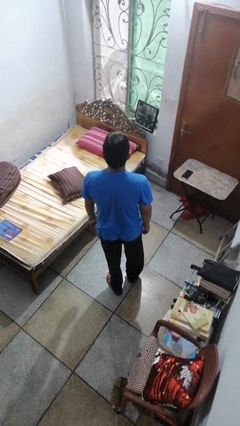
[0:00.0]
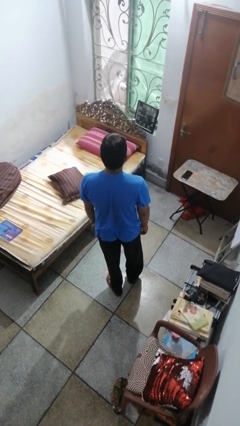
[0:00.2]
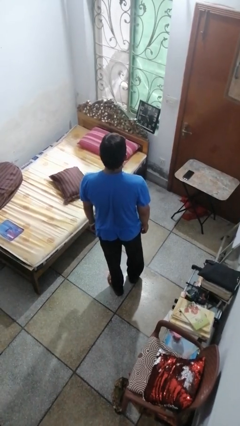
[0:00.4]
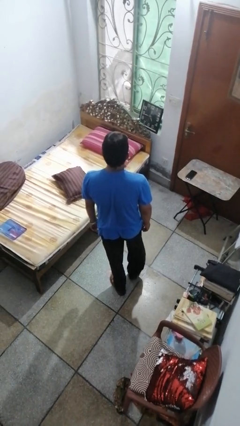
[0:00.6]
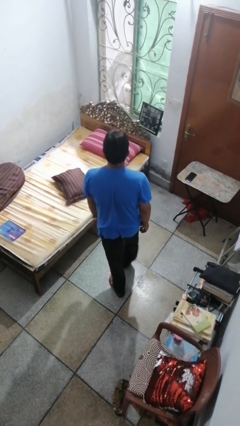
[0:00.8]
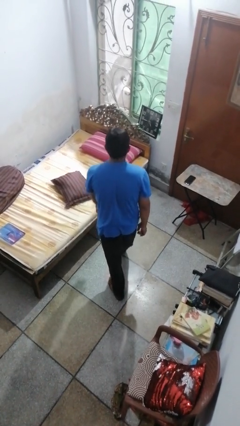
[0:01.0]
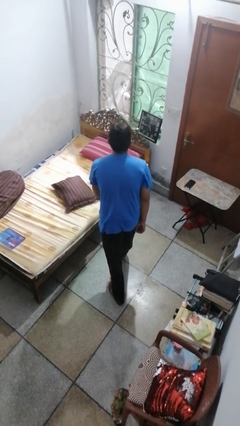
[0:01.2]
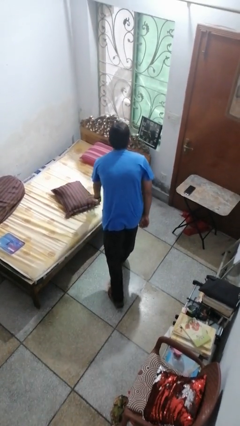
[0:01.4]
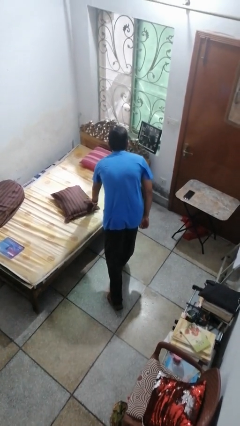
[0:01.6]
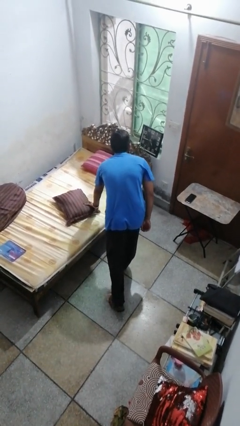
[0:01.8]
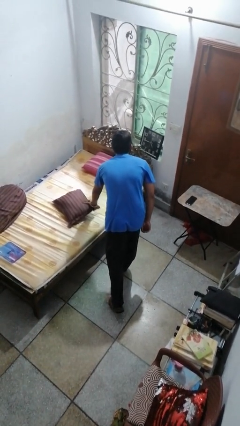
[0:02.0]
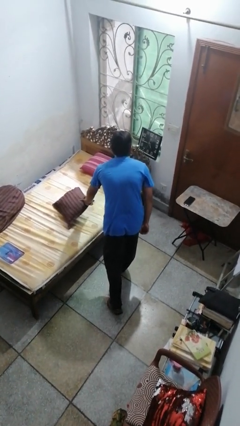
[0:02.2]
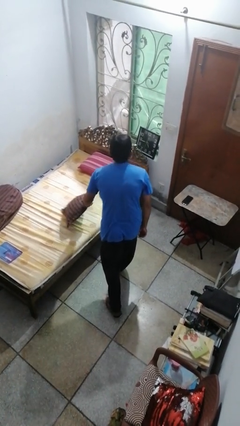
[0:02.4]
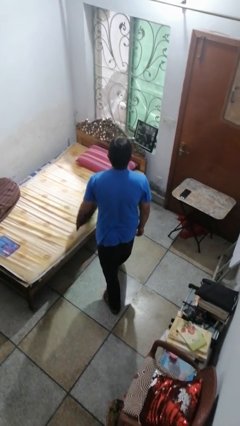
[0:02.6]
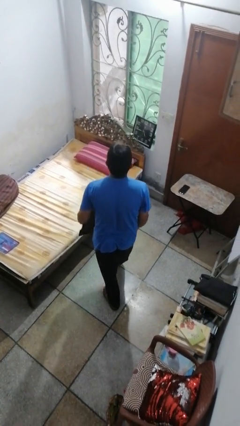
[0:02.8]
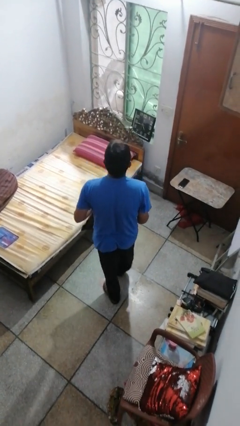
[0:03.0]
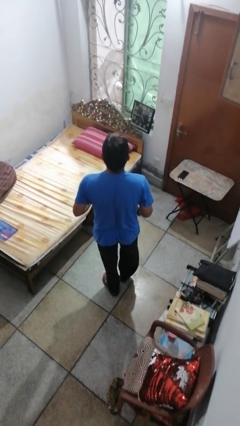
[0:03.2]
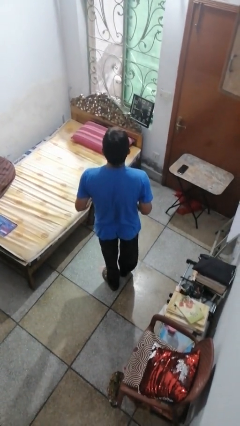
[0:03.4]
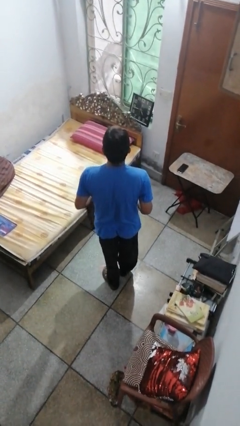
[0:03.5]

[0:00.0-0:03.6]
person picks up object from bed

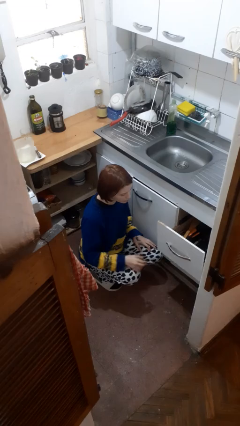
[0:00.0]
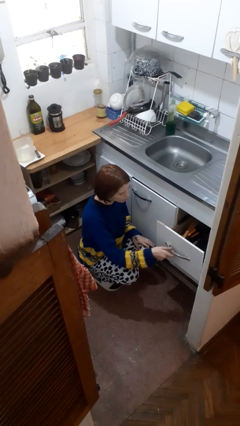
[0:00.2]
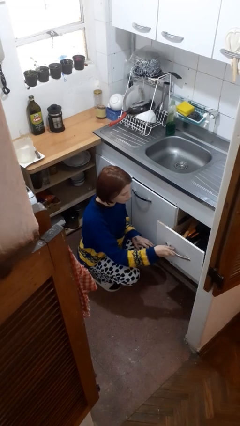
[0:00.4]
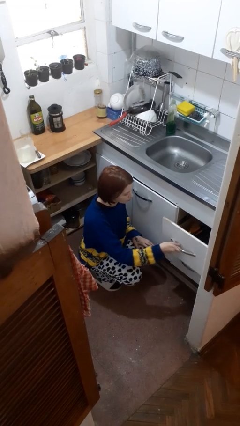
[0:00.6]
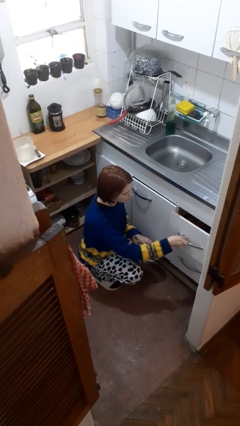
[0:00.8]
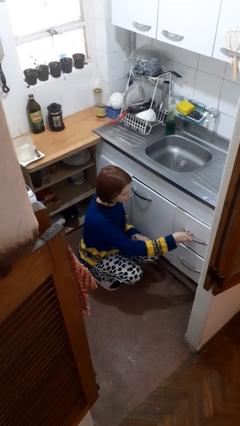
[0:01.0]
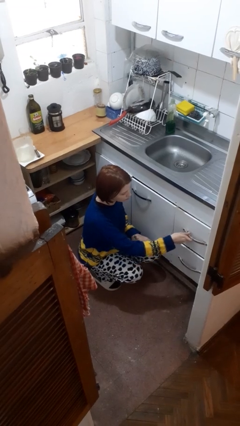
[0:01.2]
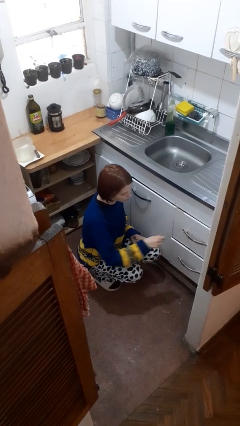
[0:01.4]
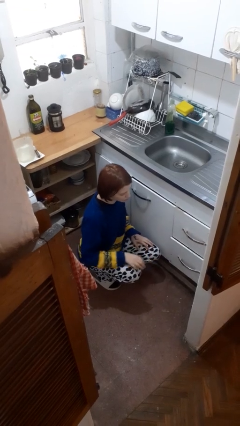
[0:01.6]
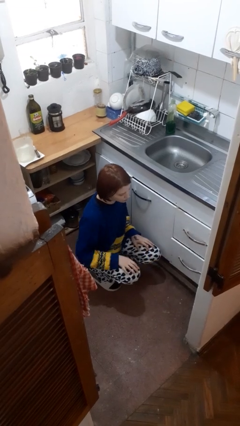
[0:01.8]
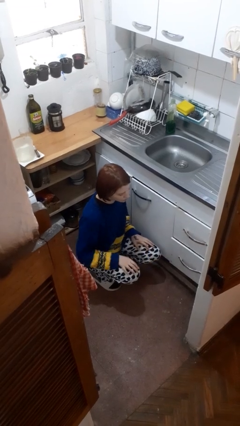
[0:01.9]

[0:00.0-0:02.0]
person closes kitchen drawer

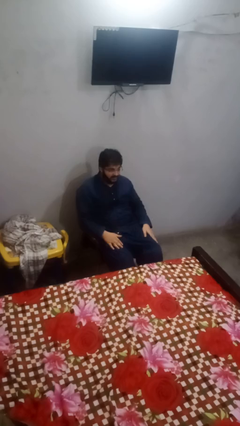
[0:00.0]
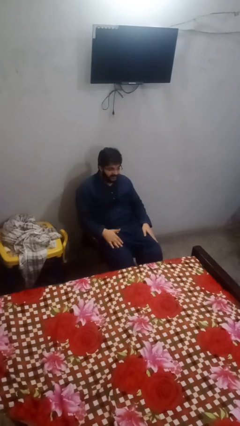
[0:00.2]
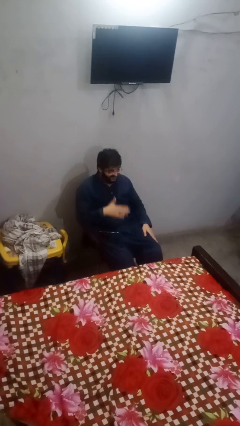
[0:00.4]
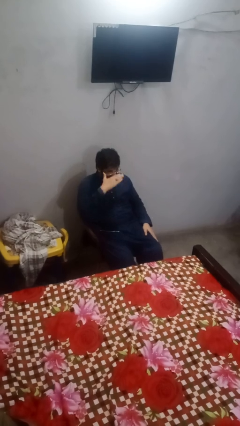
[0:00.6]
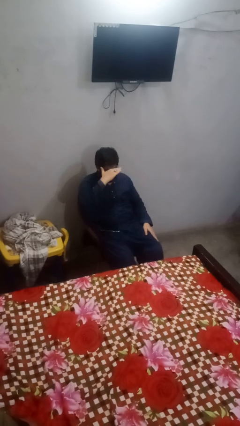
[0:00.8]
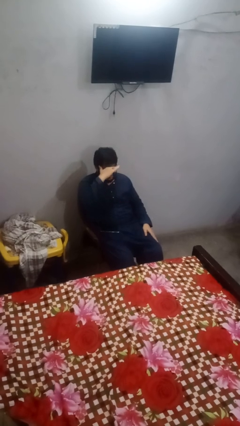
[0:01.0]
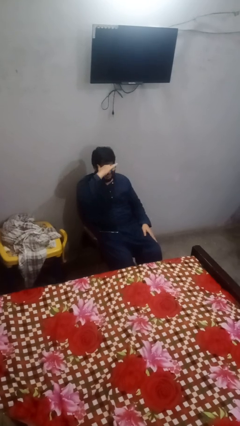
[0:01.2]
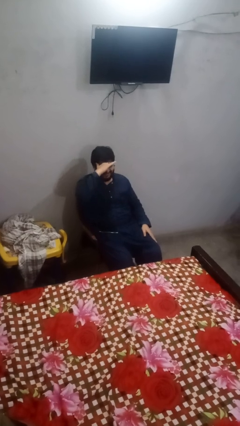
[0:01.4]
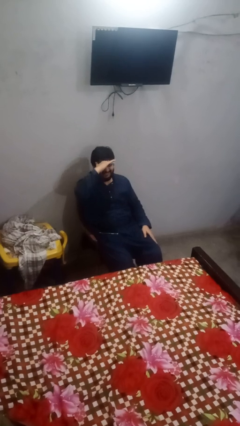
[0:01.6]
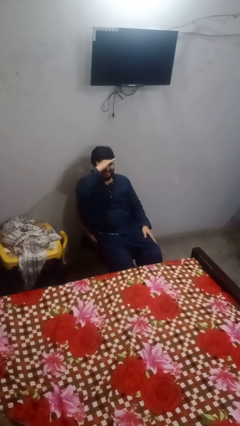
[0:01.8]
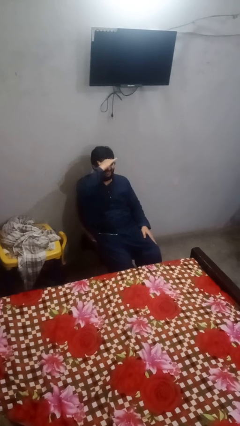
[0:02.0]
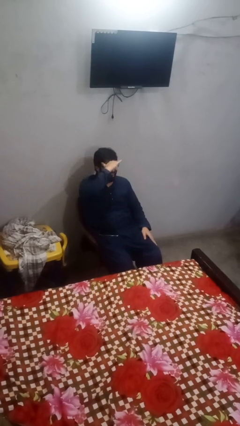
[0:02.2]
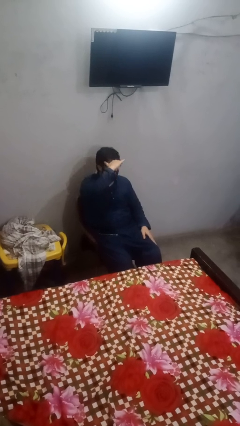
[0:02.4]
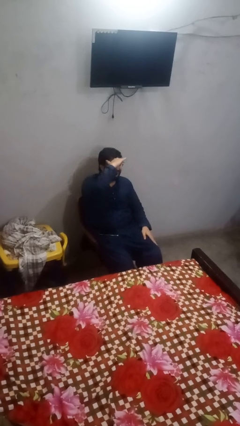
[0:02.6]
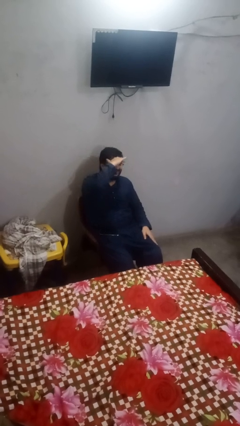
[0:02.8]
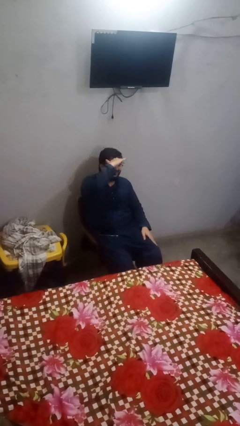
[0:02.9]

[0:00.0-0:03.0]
person shades eyes

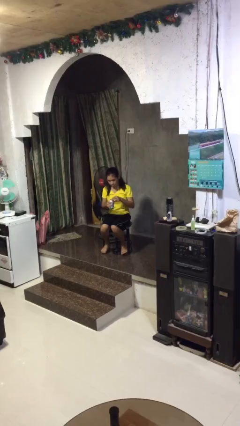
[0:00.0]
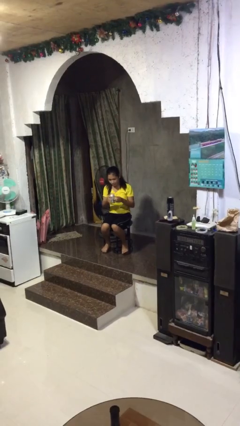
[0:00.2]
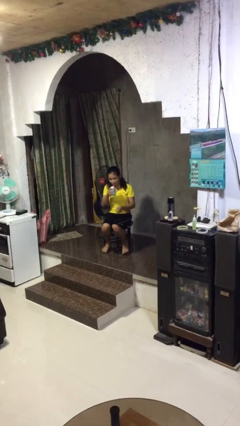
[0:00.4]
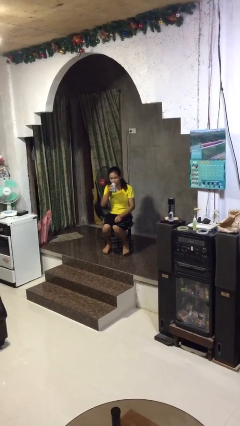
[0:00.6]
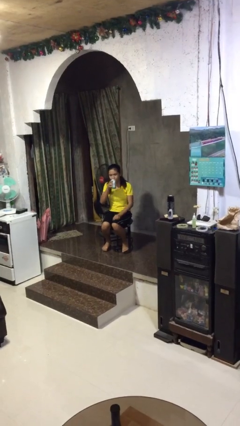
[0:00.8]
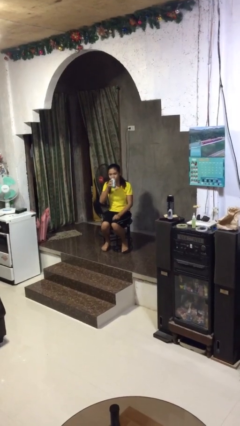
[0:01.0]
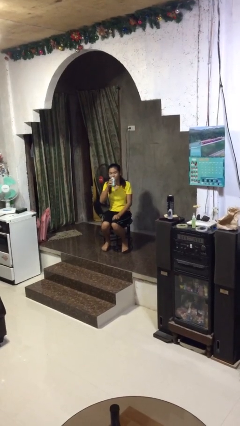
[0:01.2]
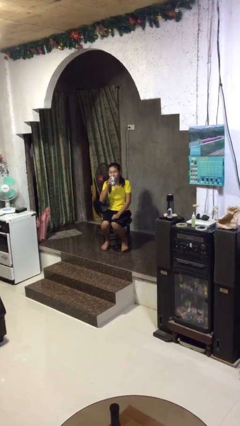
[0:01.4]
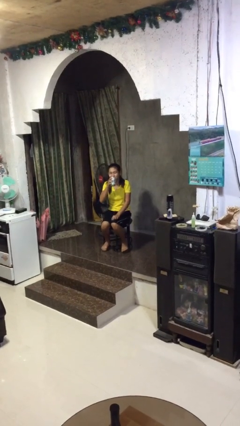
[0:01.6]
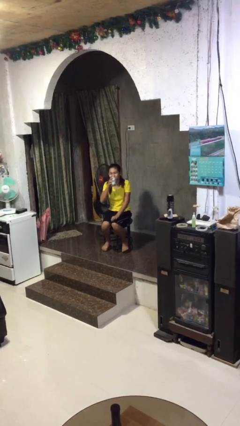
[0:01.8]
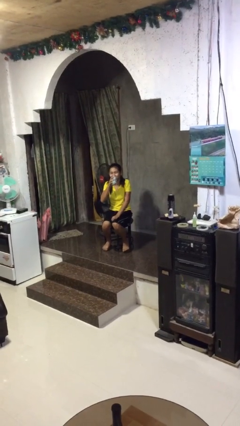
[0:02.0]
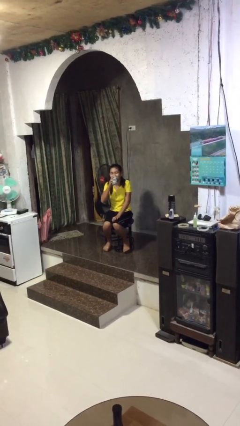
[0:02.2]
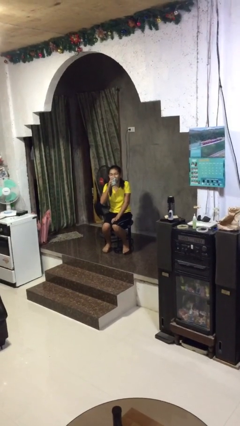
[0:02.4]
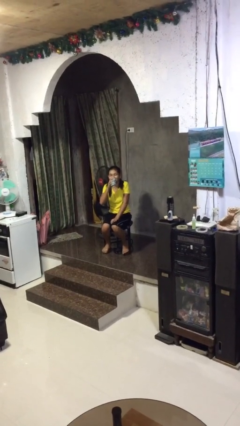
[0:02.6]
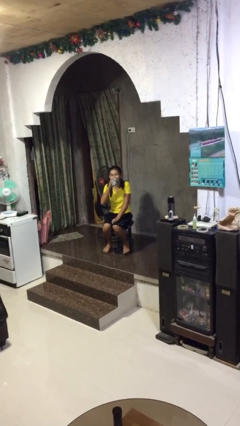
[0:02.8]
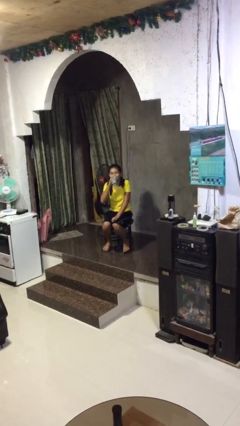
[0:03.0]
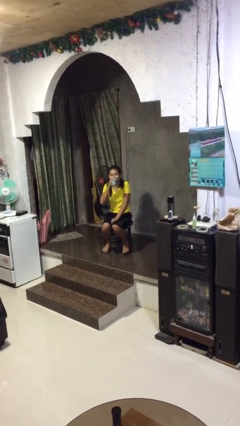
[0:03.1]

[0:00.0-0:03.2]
person drinks from beverage can

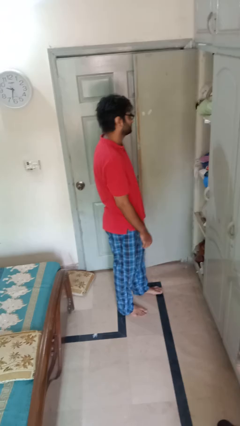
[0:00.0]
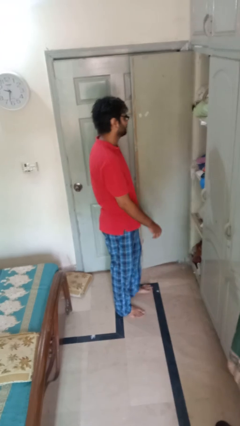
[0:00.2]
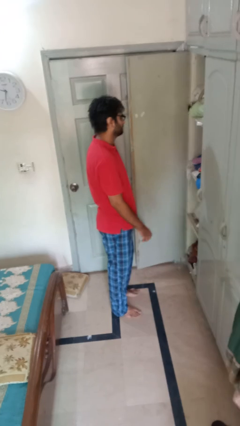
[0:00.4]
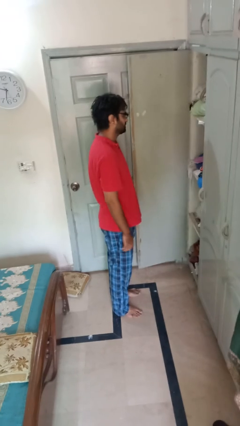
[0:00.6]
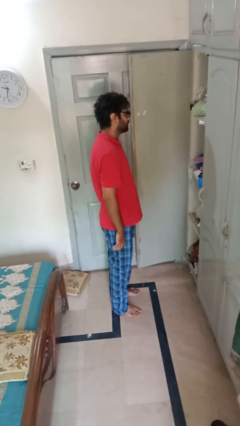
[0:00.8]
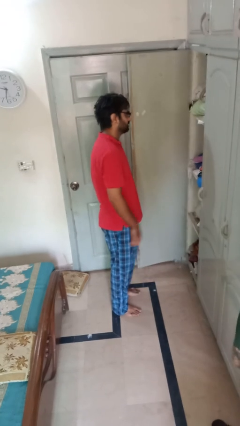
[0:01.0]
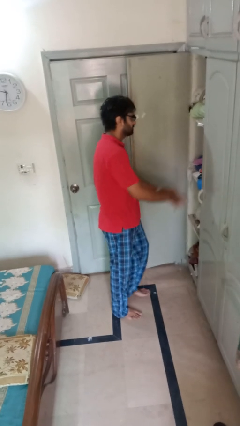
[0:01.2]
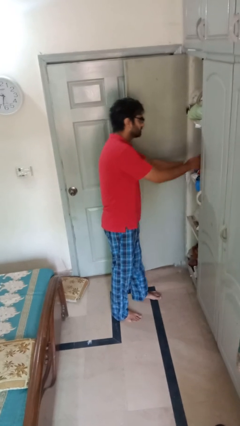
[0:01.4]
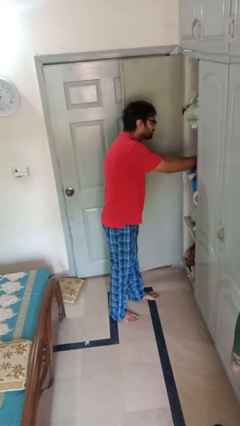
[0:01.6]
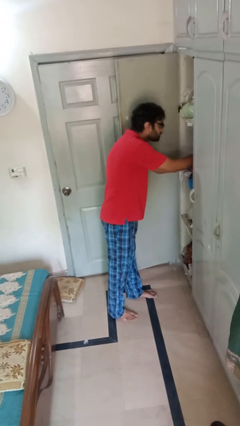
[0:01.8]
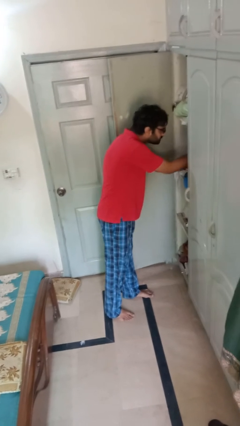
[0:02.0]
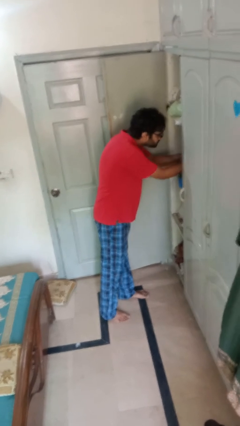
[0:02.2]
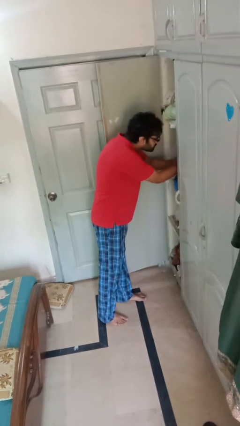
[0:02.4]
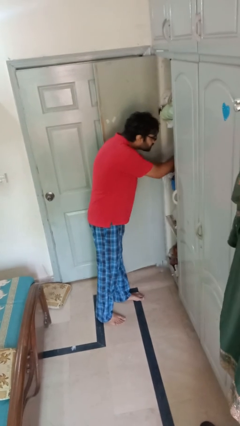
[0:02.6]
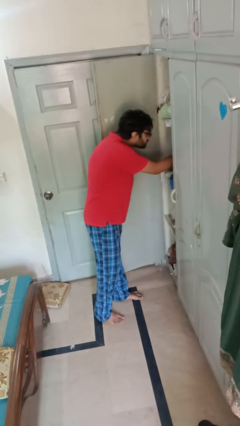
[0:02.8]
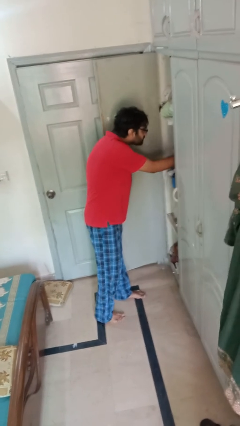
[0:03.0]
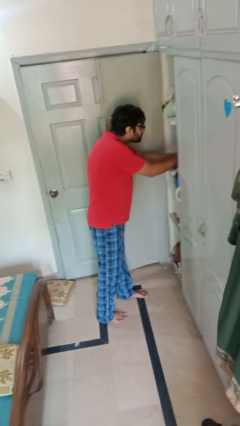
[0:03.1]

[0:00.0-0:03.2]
person searches in cabinet

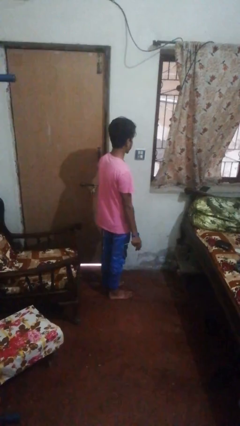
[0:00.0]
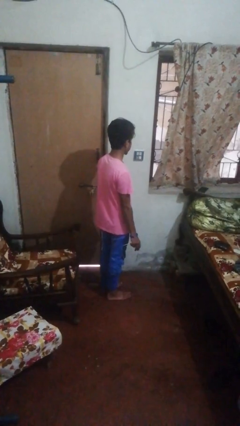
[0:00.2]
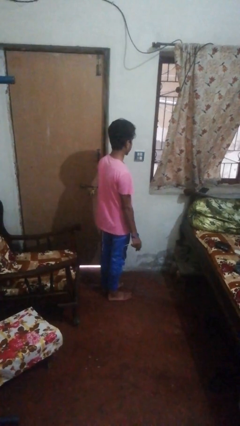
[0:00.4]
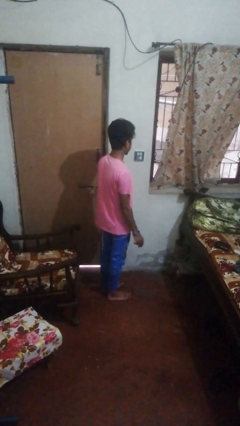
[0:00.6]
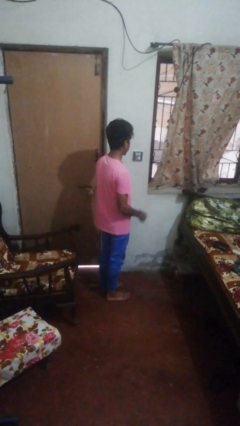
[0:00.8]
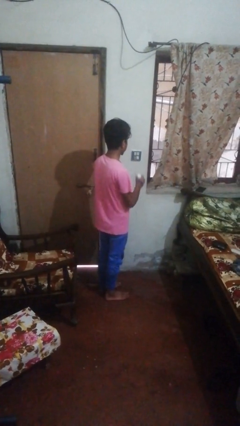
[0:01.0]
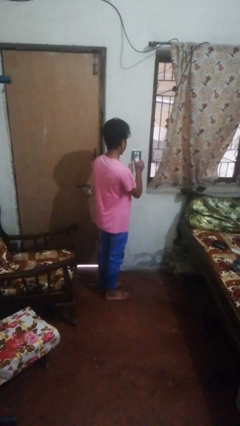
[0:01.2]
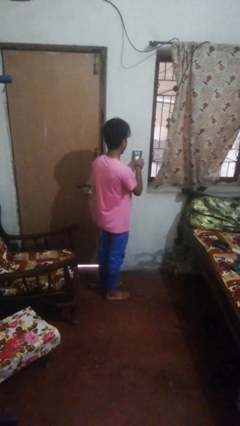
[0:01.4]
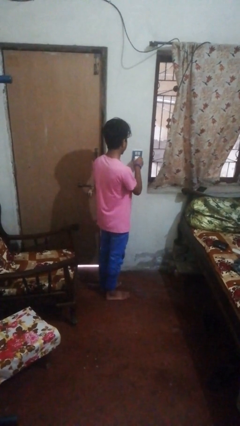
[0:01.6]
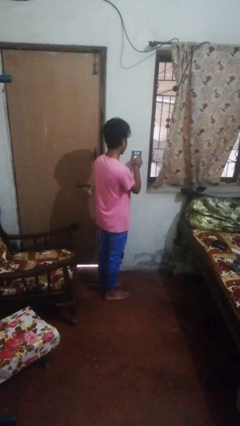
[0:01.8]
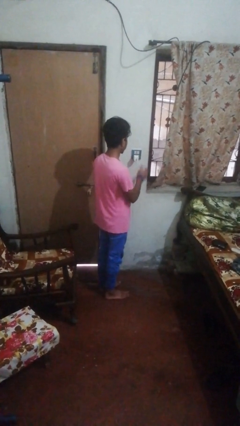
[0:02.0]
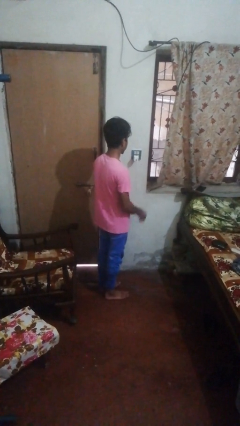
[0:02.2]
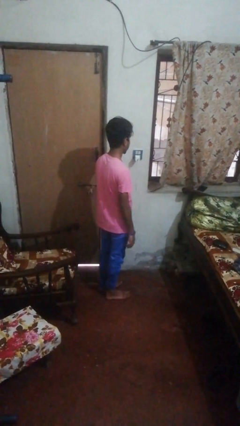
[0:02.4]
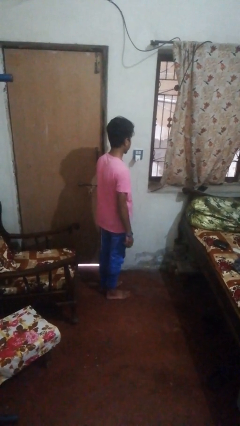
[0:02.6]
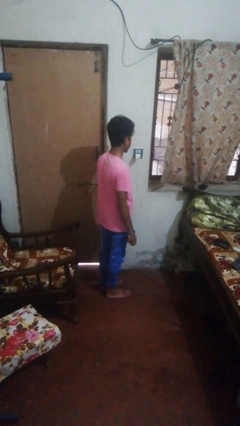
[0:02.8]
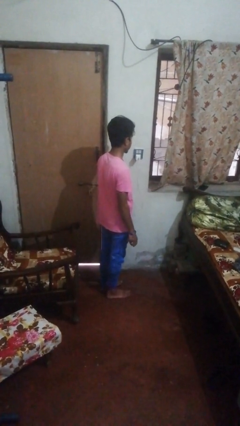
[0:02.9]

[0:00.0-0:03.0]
person plugs into electrical socket
